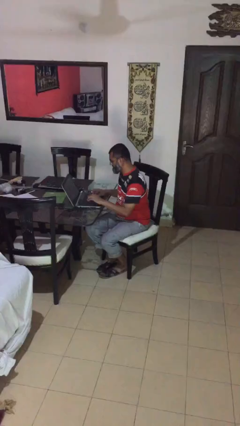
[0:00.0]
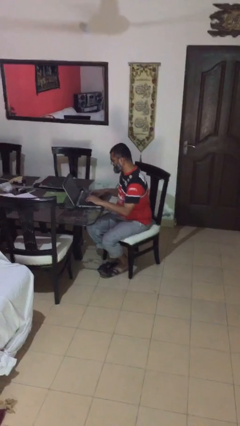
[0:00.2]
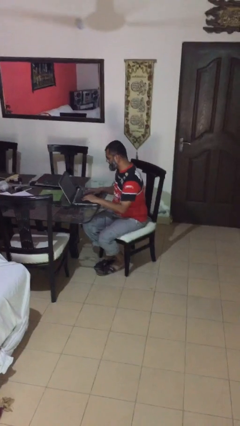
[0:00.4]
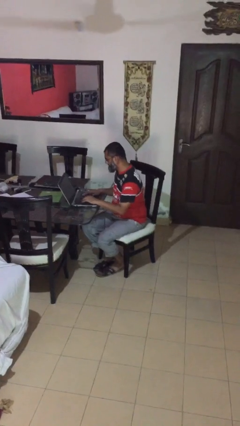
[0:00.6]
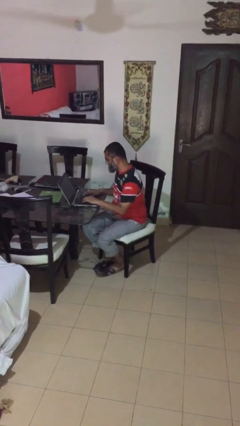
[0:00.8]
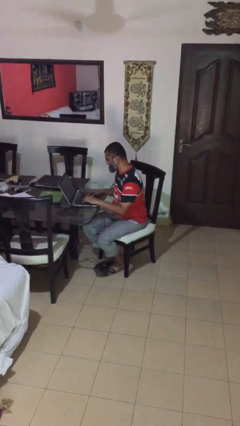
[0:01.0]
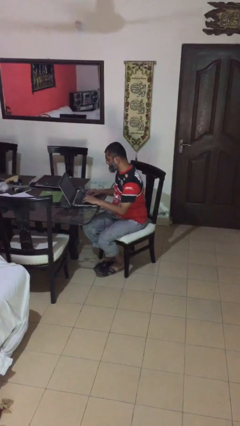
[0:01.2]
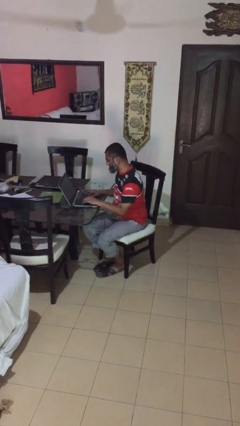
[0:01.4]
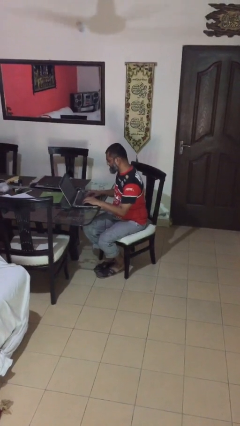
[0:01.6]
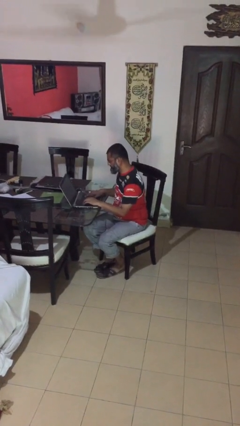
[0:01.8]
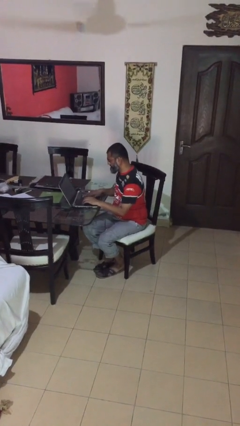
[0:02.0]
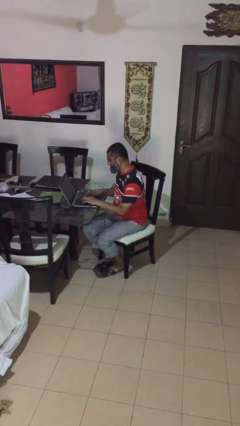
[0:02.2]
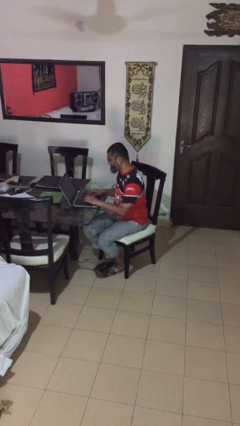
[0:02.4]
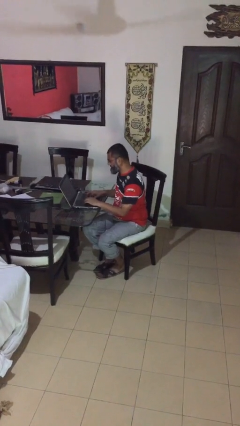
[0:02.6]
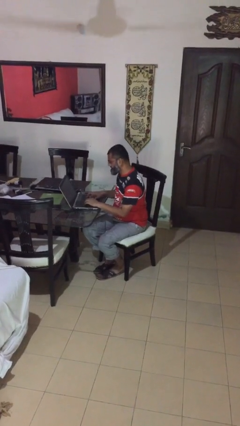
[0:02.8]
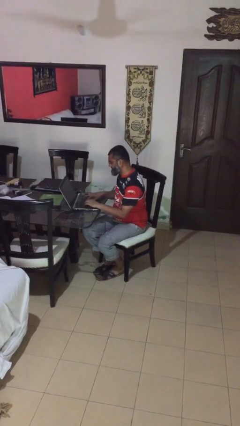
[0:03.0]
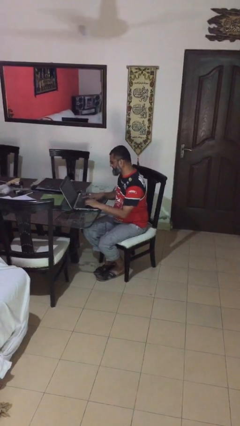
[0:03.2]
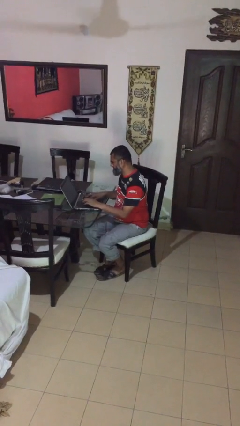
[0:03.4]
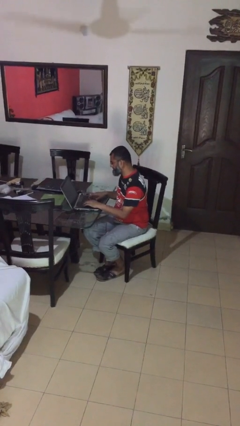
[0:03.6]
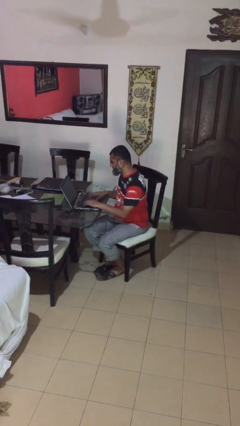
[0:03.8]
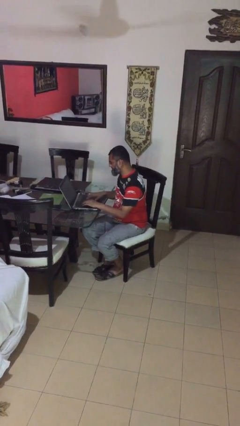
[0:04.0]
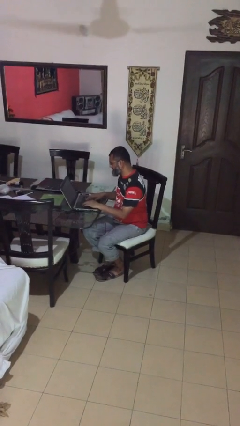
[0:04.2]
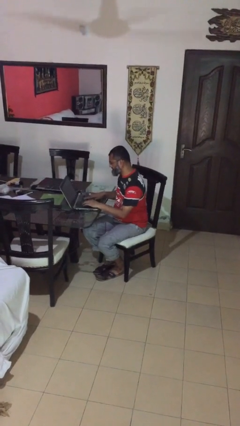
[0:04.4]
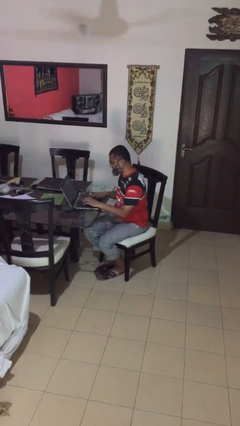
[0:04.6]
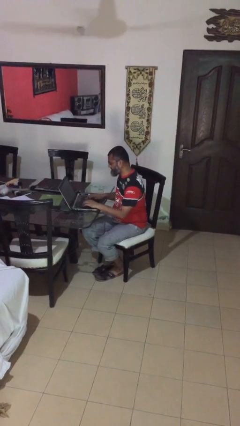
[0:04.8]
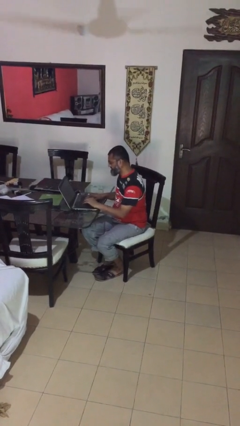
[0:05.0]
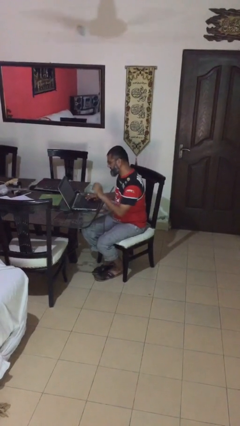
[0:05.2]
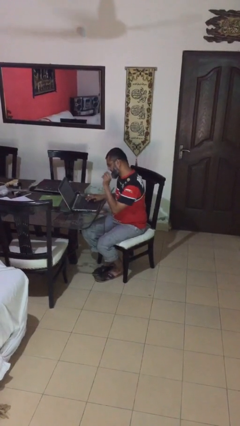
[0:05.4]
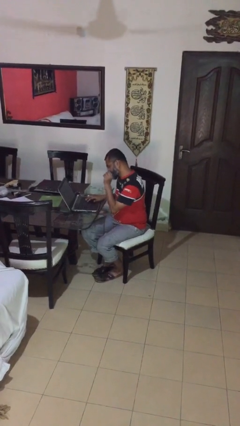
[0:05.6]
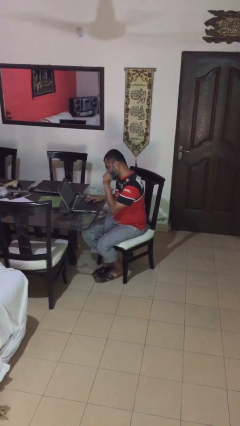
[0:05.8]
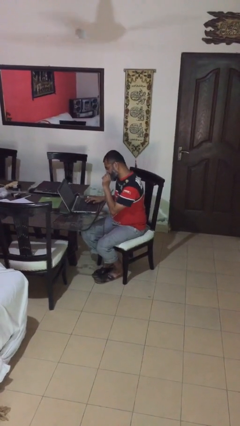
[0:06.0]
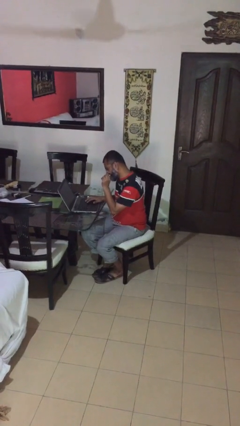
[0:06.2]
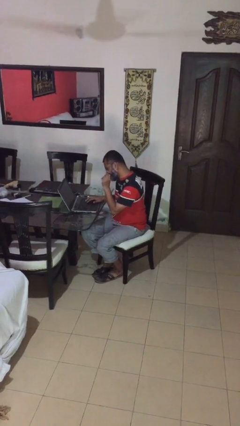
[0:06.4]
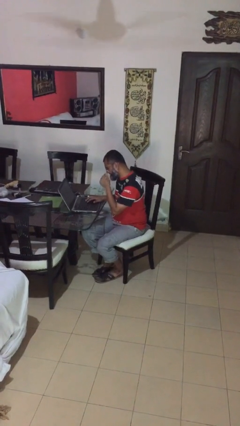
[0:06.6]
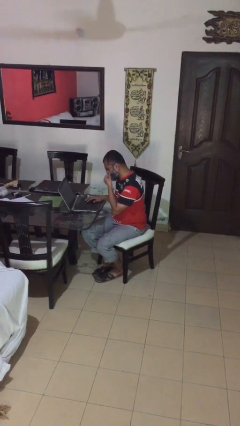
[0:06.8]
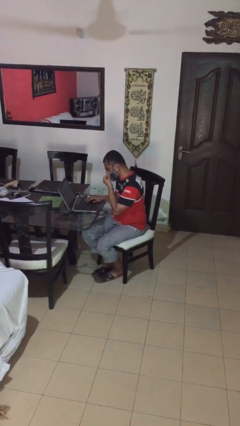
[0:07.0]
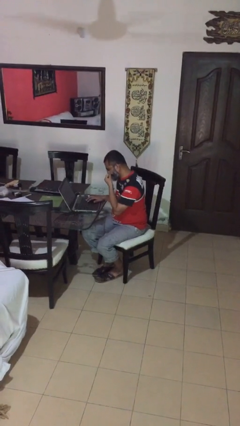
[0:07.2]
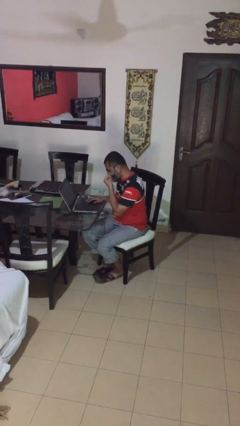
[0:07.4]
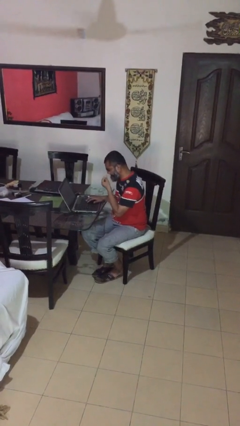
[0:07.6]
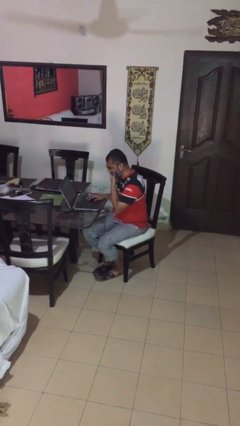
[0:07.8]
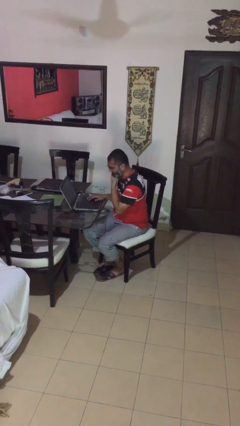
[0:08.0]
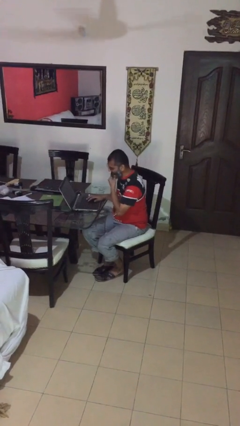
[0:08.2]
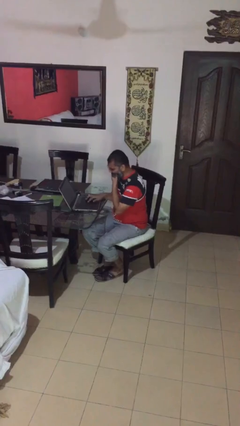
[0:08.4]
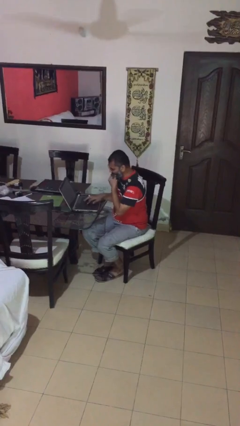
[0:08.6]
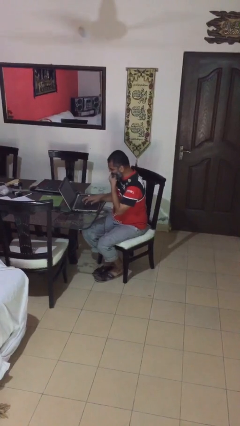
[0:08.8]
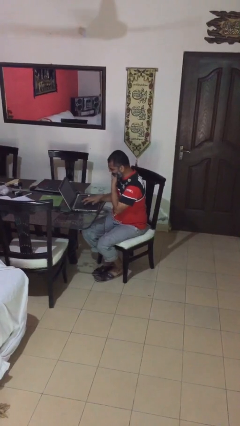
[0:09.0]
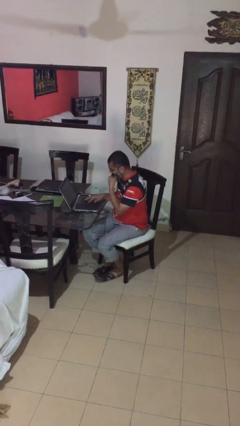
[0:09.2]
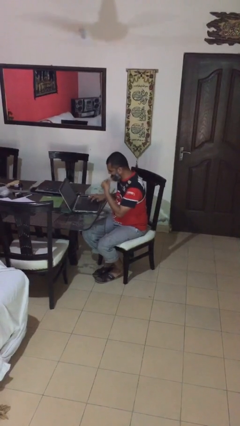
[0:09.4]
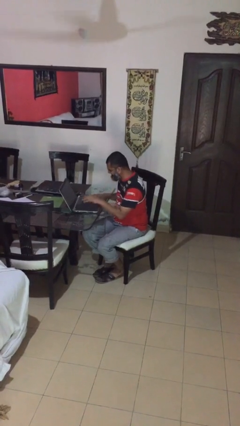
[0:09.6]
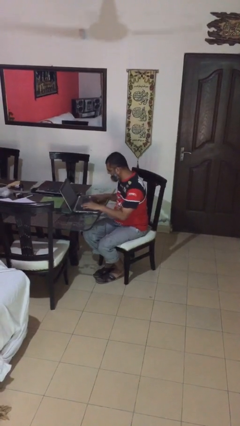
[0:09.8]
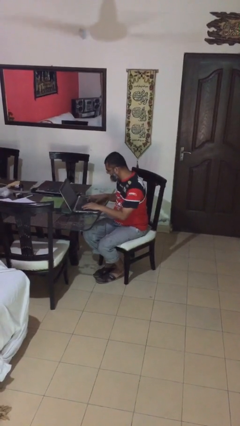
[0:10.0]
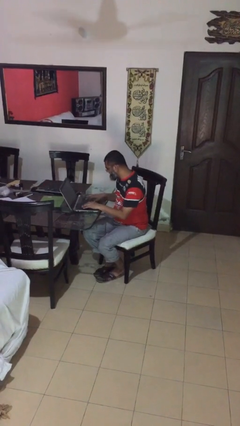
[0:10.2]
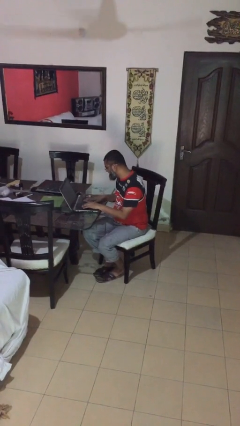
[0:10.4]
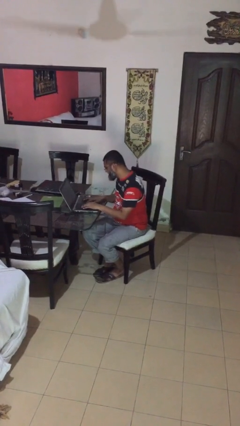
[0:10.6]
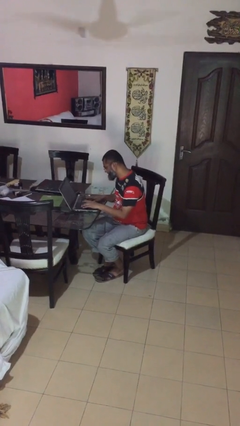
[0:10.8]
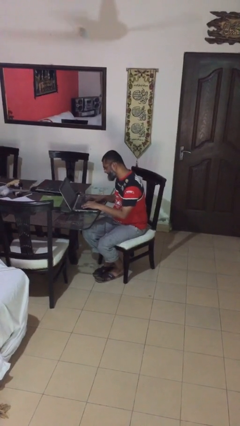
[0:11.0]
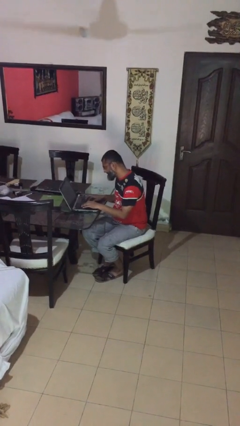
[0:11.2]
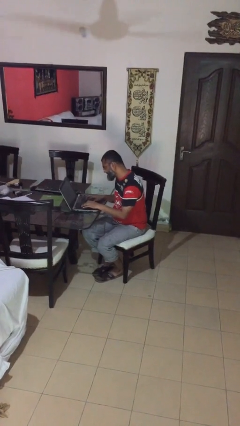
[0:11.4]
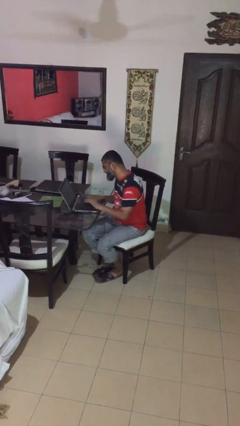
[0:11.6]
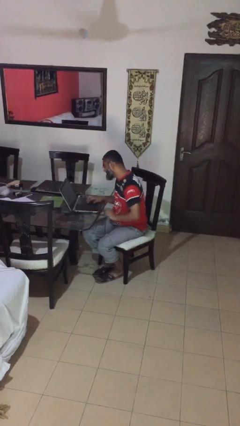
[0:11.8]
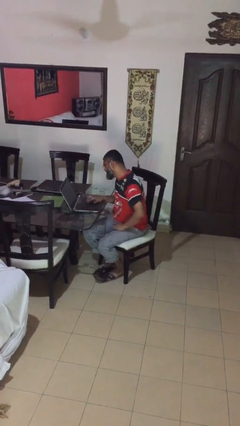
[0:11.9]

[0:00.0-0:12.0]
person interacts with laptop

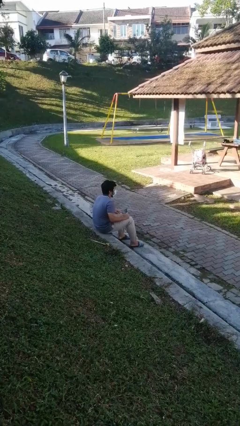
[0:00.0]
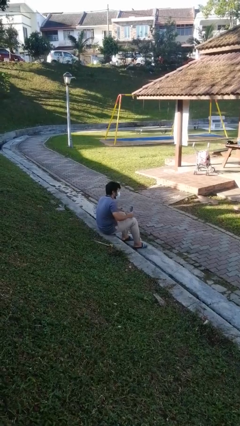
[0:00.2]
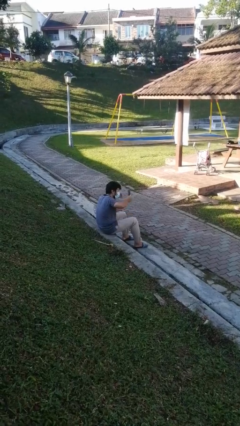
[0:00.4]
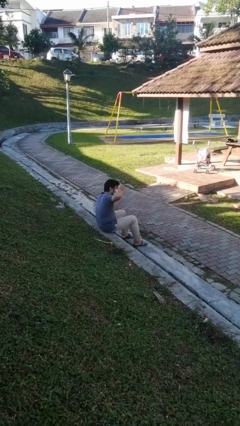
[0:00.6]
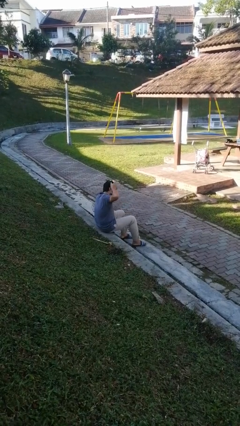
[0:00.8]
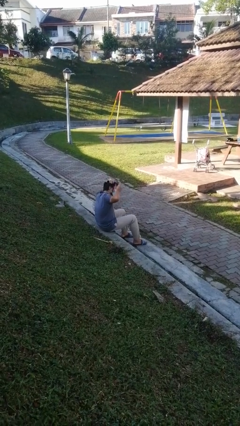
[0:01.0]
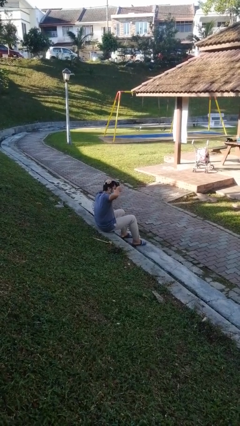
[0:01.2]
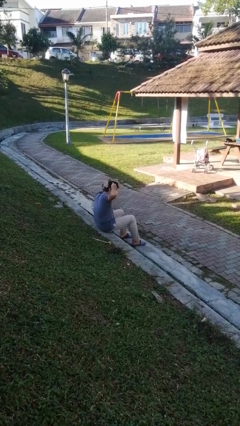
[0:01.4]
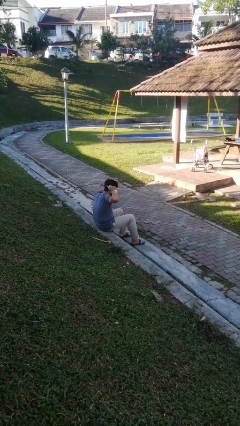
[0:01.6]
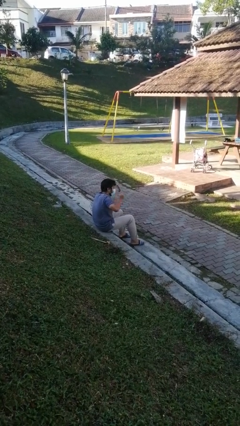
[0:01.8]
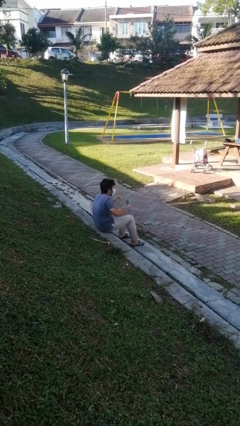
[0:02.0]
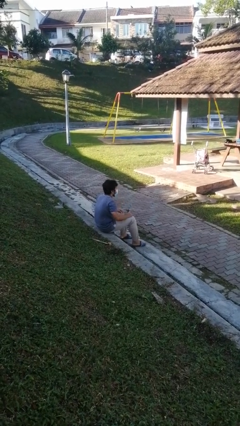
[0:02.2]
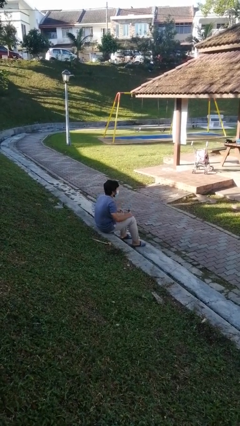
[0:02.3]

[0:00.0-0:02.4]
person brushes hair

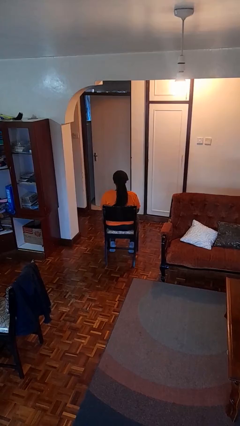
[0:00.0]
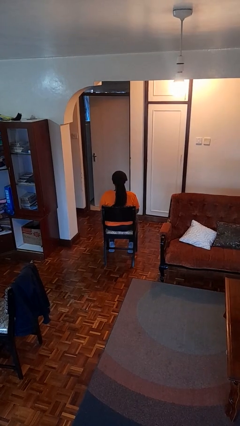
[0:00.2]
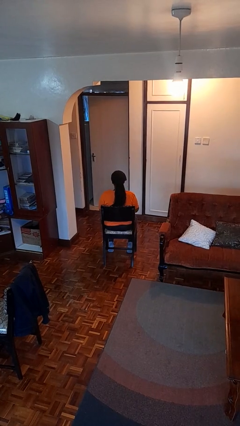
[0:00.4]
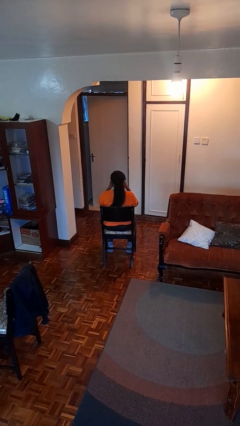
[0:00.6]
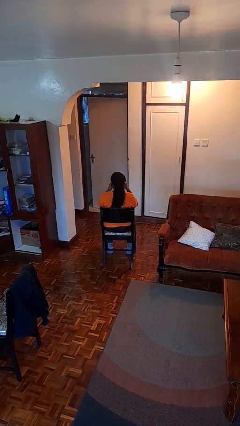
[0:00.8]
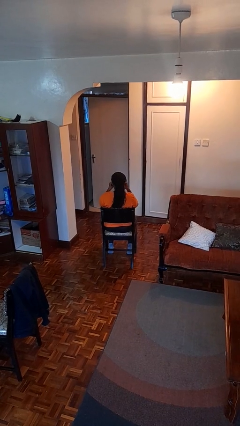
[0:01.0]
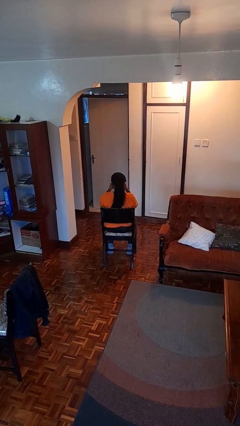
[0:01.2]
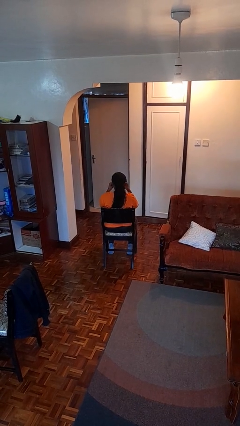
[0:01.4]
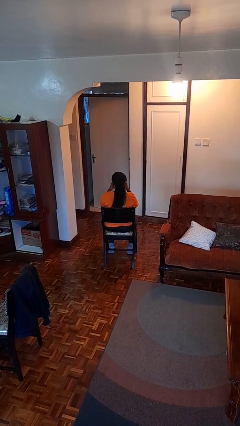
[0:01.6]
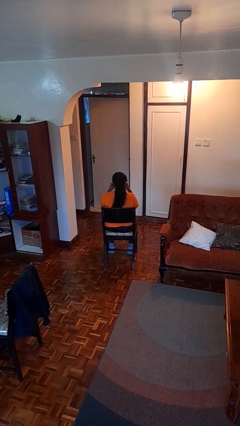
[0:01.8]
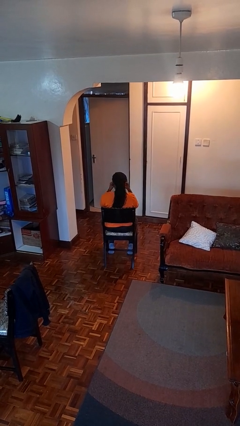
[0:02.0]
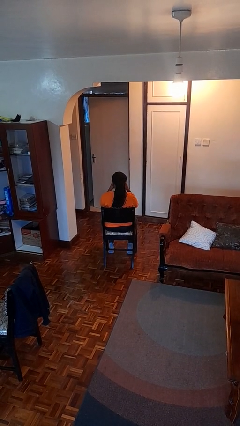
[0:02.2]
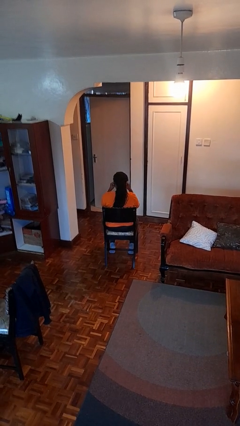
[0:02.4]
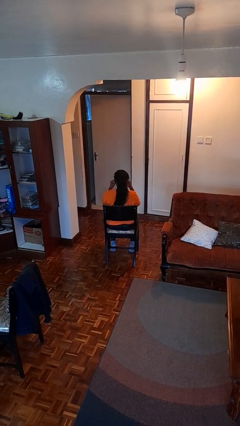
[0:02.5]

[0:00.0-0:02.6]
person rubs eyes

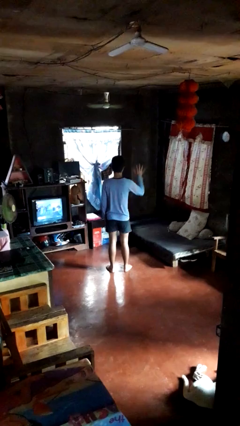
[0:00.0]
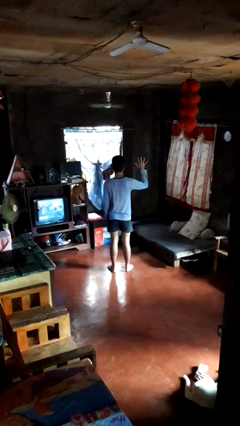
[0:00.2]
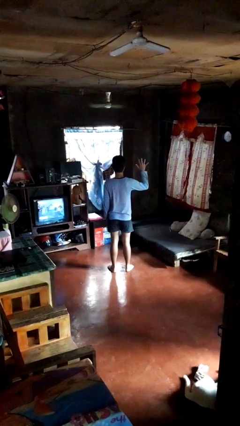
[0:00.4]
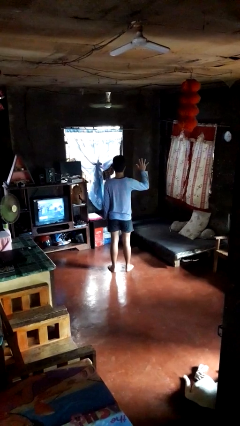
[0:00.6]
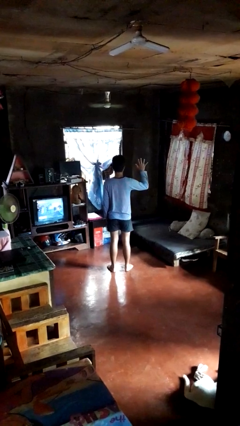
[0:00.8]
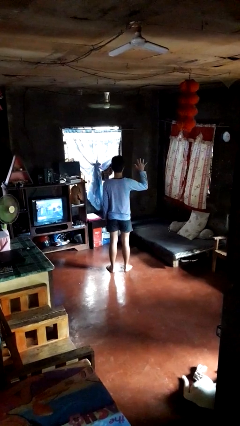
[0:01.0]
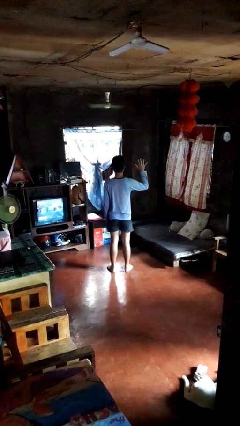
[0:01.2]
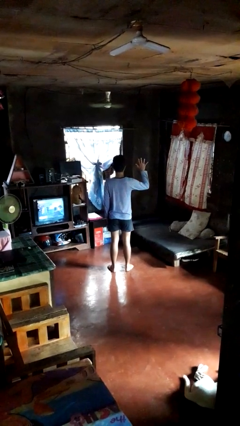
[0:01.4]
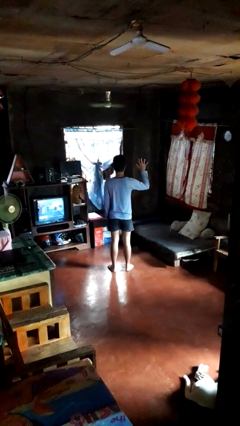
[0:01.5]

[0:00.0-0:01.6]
person gestures number five
